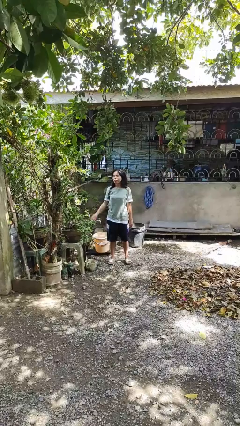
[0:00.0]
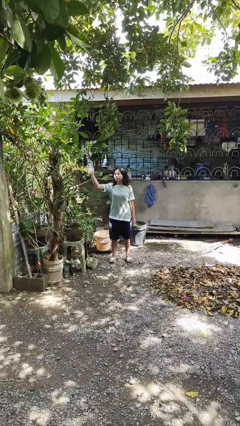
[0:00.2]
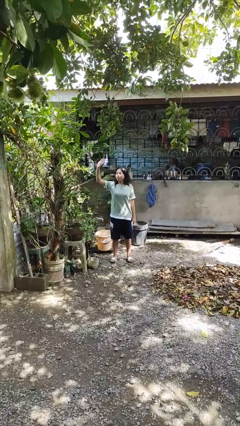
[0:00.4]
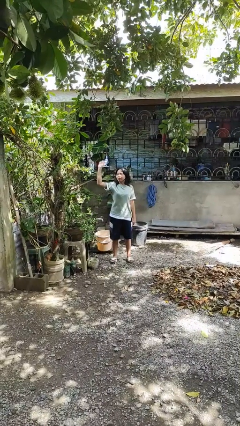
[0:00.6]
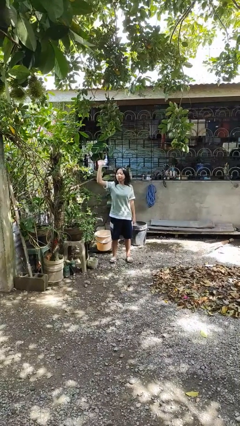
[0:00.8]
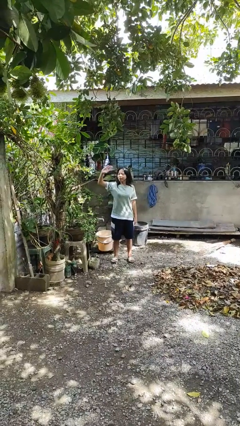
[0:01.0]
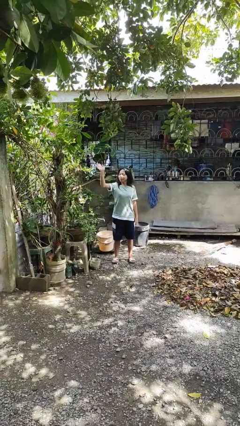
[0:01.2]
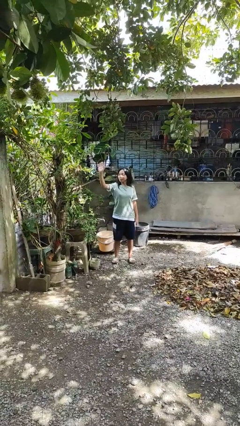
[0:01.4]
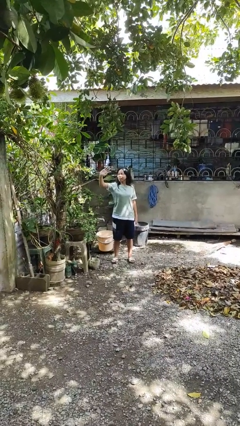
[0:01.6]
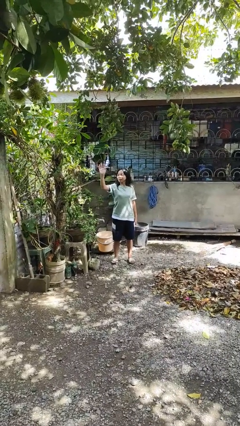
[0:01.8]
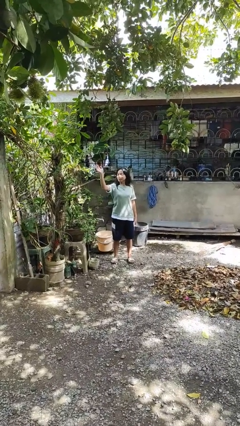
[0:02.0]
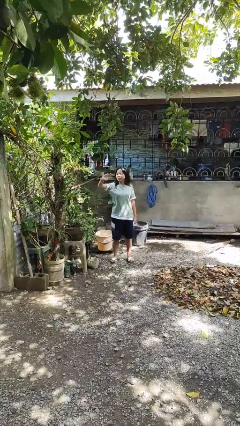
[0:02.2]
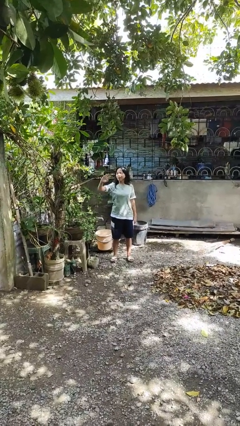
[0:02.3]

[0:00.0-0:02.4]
person waves at person

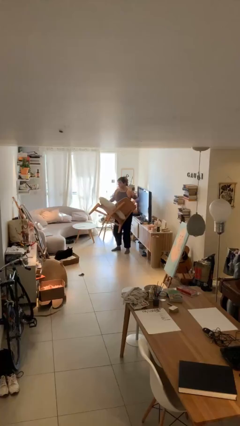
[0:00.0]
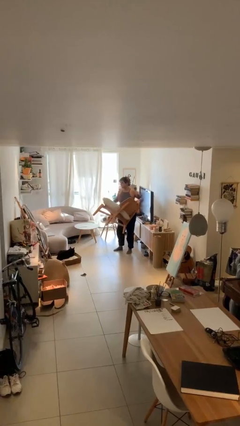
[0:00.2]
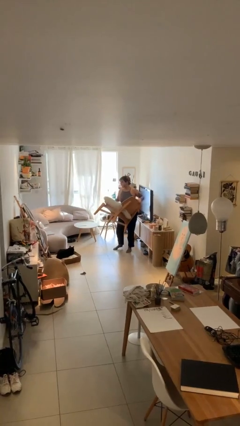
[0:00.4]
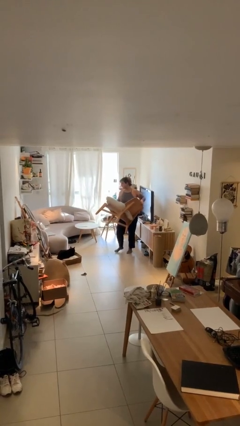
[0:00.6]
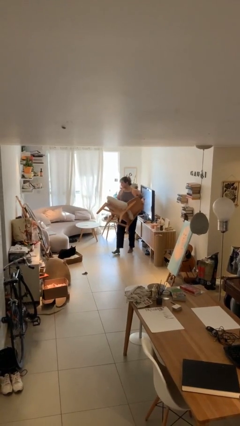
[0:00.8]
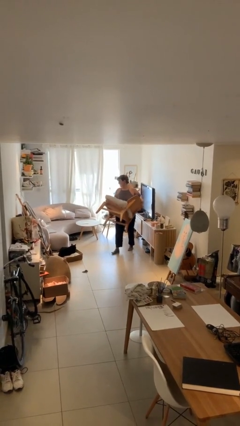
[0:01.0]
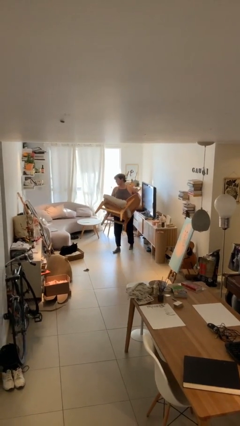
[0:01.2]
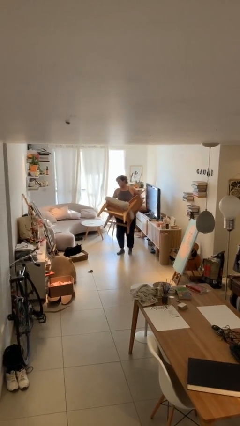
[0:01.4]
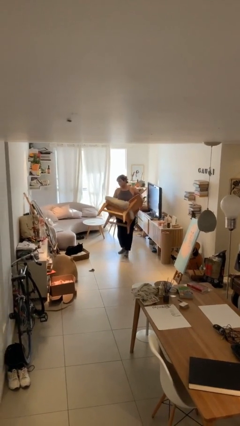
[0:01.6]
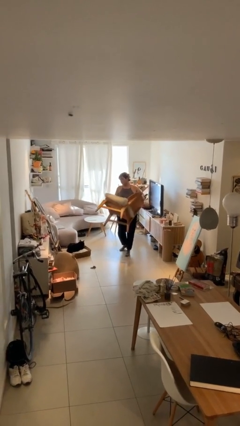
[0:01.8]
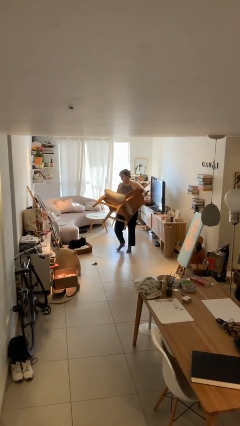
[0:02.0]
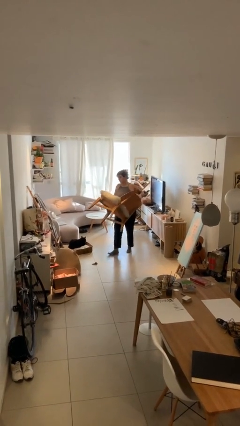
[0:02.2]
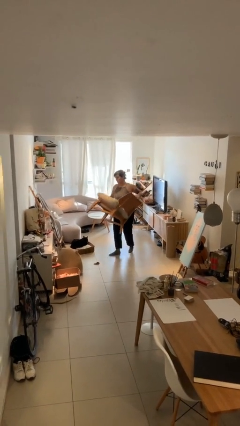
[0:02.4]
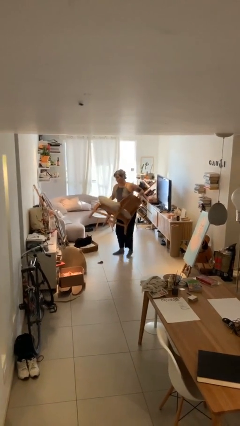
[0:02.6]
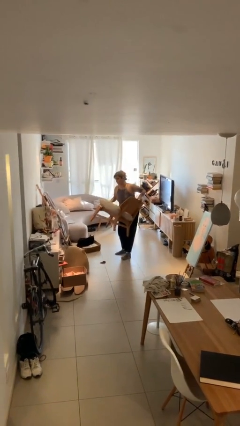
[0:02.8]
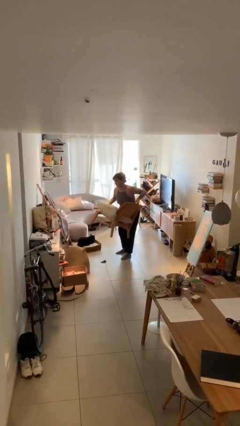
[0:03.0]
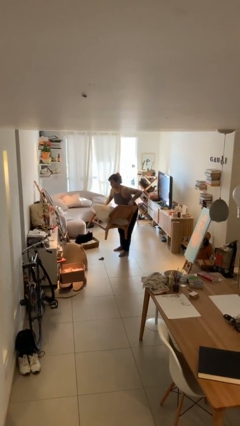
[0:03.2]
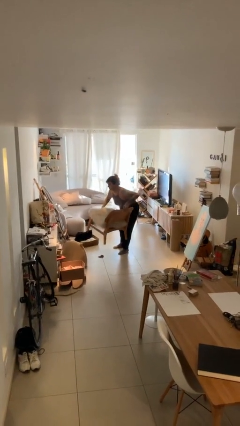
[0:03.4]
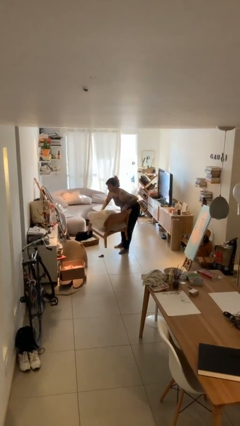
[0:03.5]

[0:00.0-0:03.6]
person carries heavy object

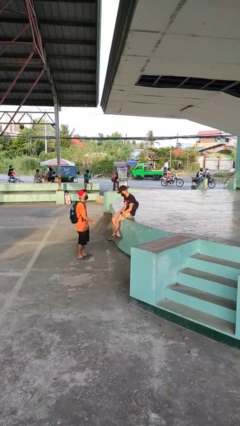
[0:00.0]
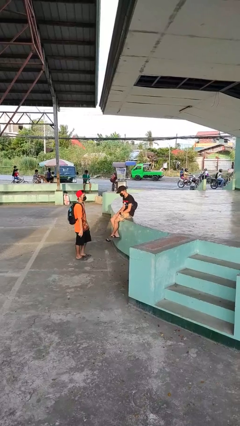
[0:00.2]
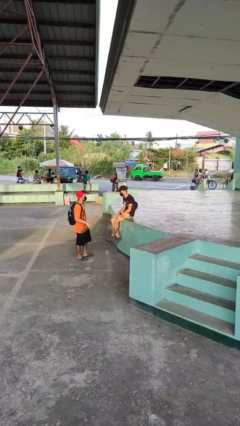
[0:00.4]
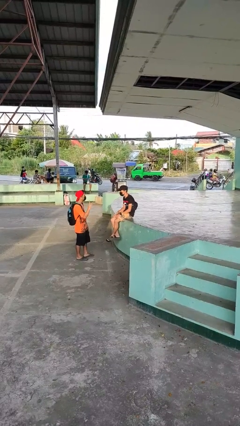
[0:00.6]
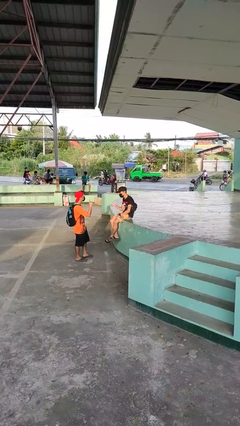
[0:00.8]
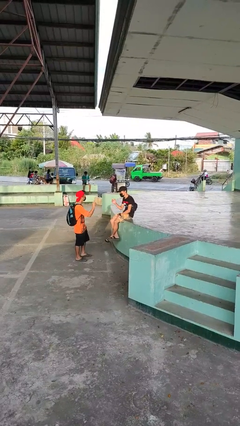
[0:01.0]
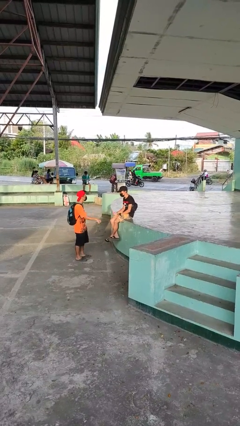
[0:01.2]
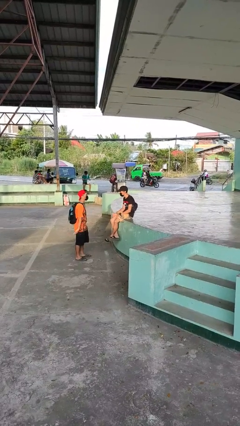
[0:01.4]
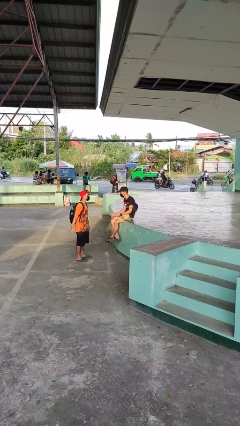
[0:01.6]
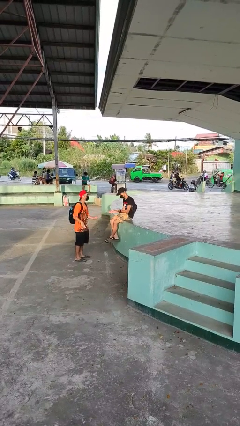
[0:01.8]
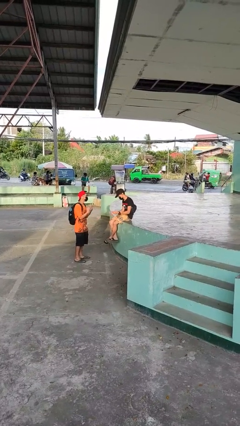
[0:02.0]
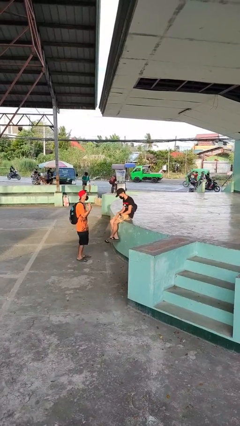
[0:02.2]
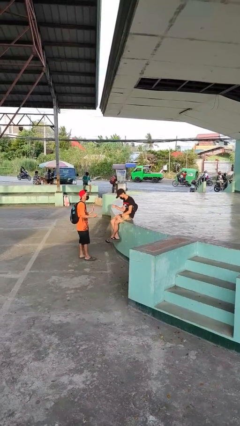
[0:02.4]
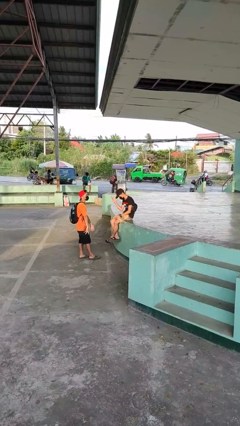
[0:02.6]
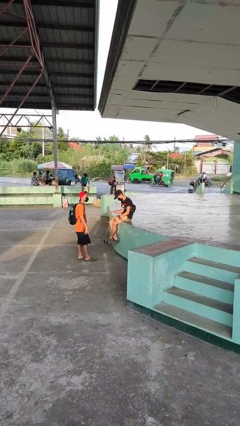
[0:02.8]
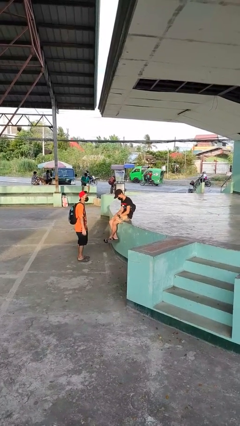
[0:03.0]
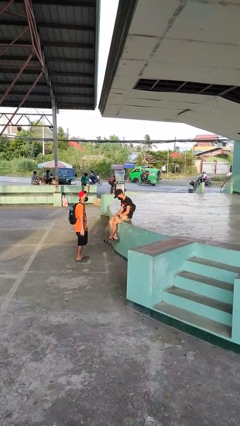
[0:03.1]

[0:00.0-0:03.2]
person talks to person

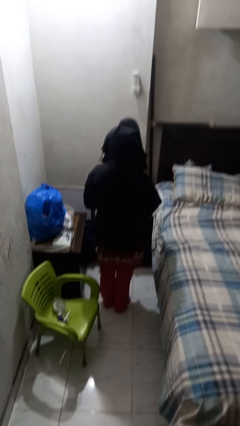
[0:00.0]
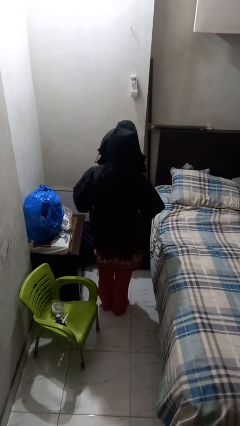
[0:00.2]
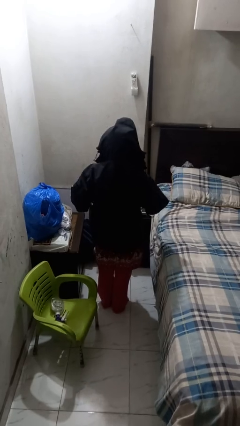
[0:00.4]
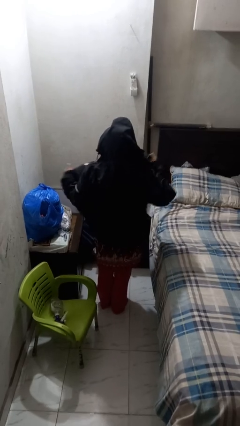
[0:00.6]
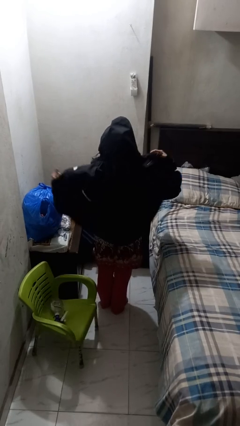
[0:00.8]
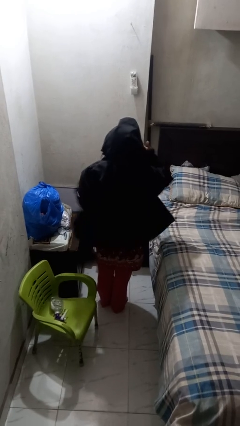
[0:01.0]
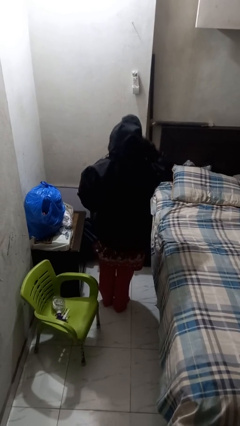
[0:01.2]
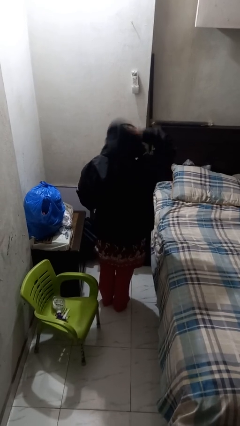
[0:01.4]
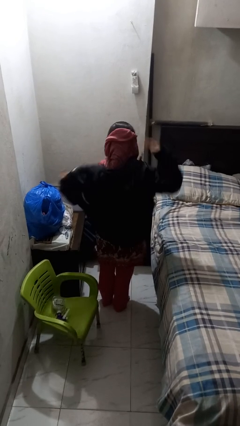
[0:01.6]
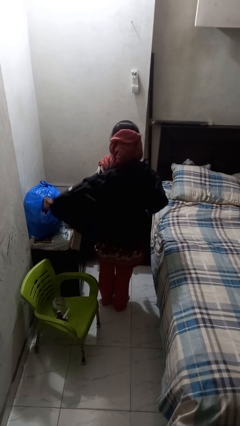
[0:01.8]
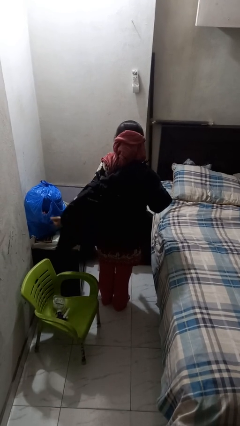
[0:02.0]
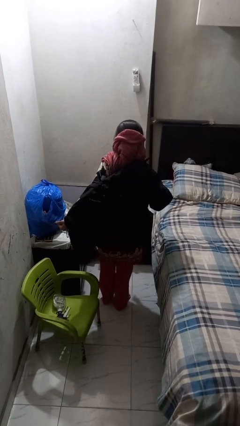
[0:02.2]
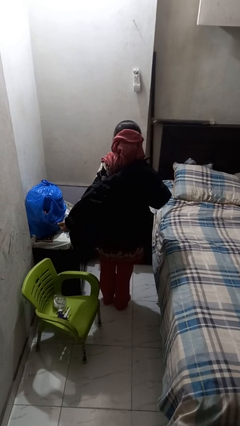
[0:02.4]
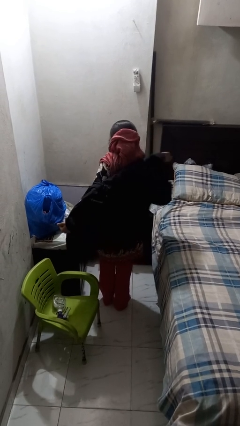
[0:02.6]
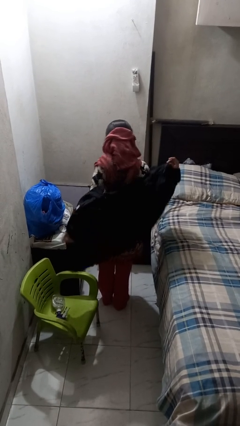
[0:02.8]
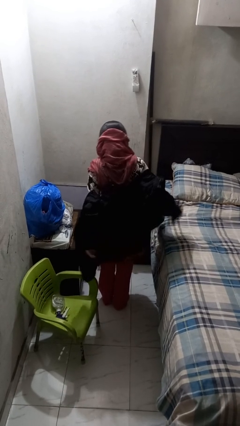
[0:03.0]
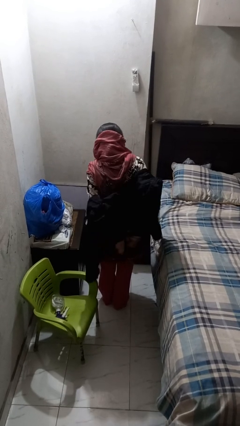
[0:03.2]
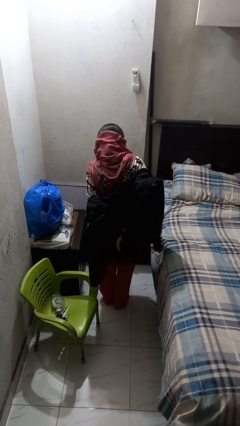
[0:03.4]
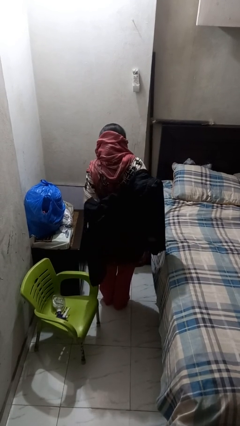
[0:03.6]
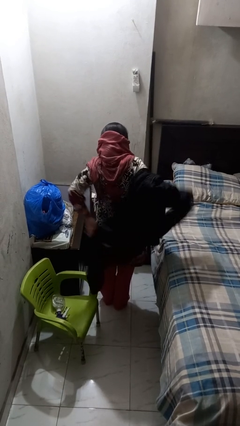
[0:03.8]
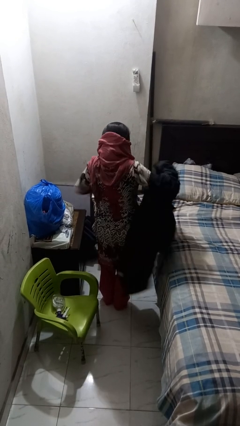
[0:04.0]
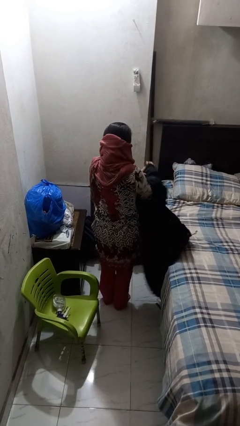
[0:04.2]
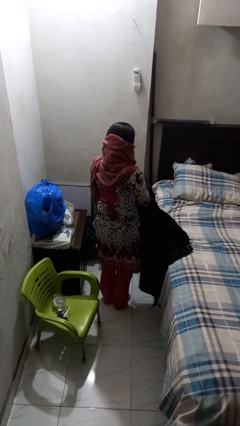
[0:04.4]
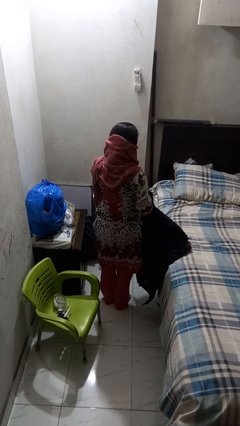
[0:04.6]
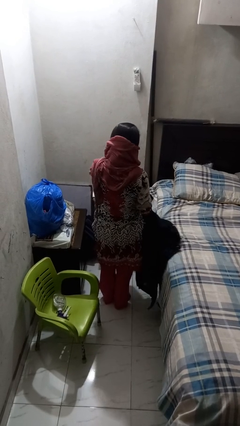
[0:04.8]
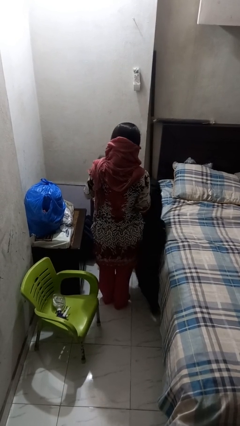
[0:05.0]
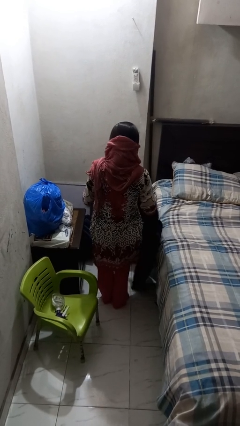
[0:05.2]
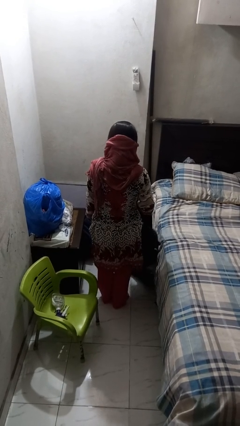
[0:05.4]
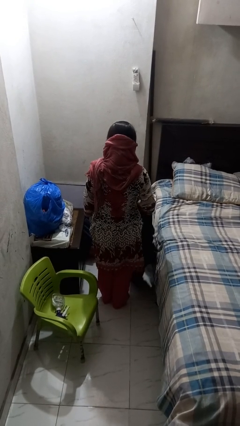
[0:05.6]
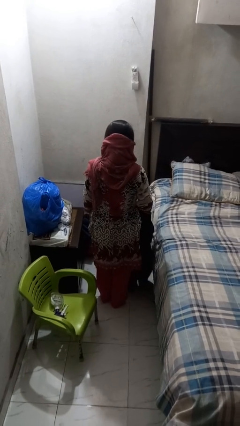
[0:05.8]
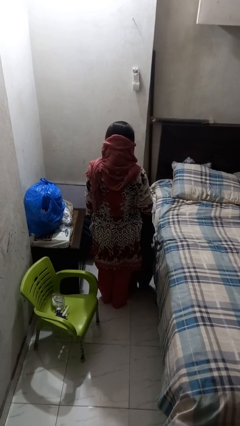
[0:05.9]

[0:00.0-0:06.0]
person takes off hoodie

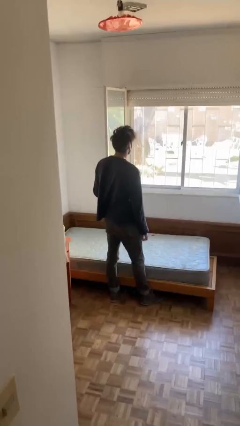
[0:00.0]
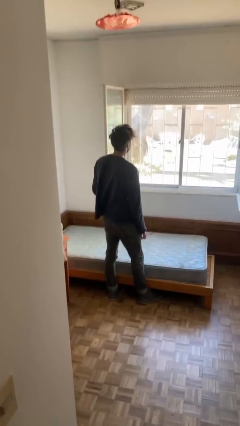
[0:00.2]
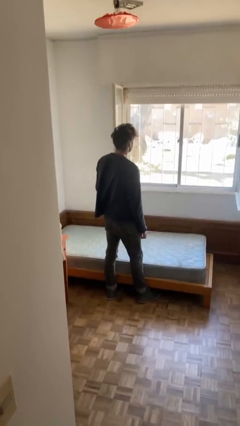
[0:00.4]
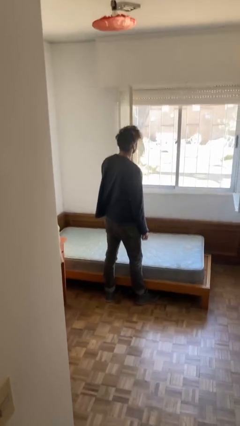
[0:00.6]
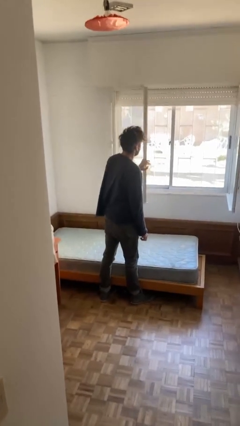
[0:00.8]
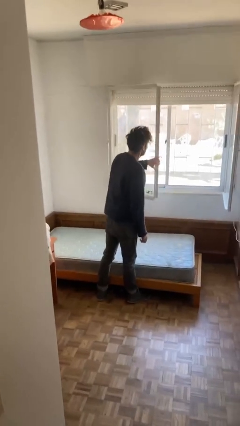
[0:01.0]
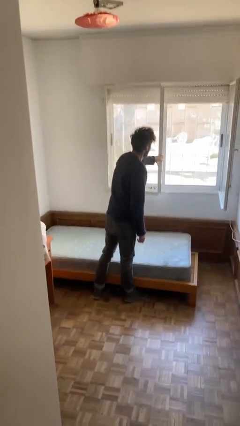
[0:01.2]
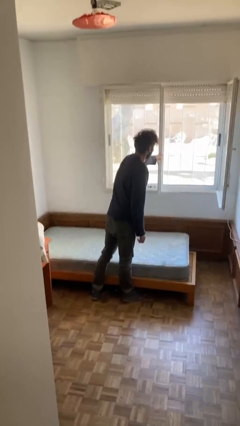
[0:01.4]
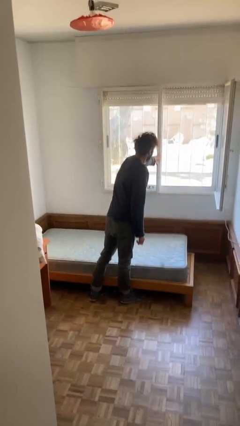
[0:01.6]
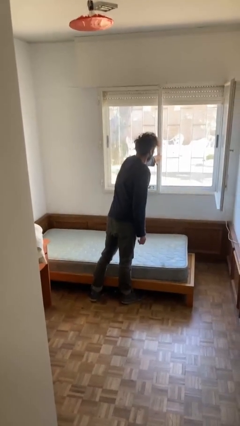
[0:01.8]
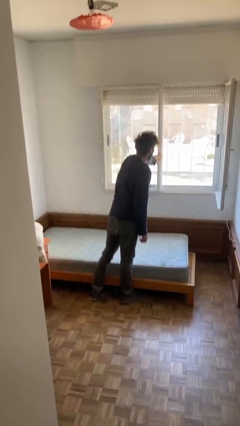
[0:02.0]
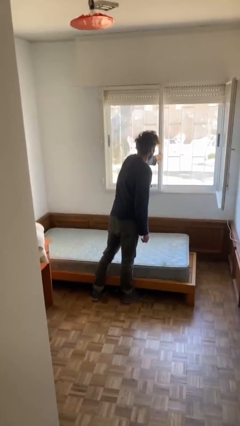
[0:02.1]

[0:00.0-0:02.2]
person closes home window

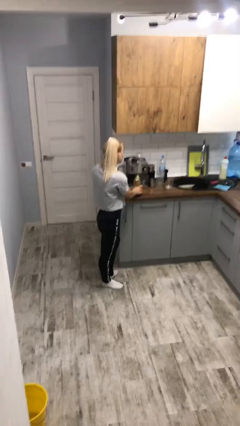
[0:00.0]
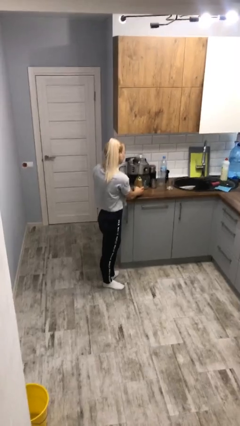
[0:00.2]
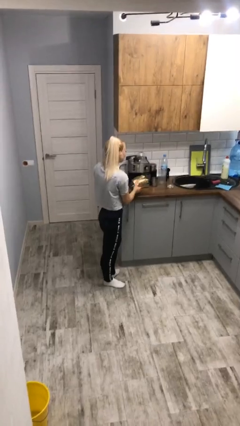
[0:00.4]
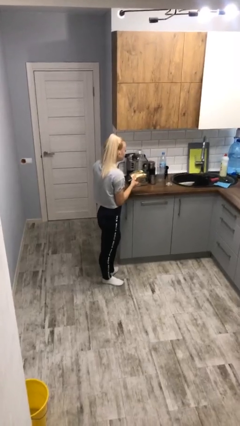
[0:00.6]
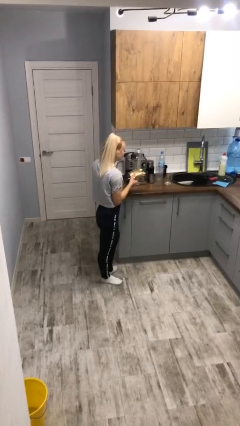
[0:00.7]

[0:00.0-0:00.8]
person picks up object from table
